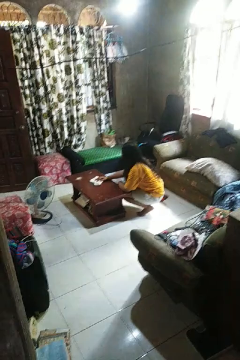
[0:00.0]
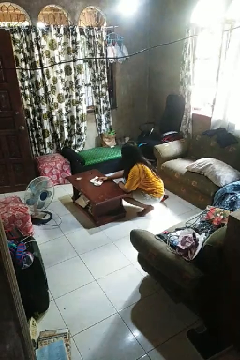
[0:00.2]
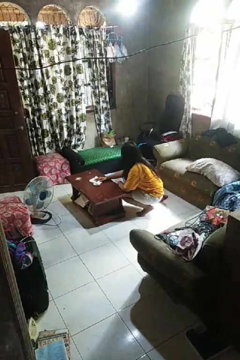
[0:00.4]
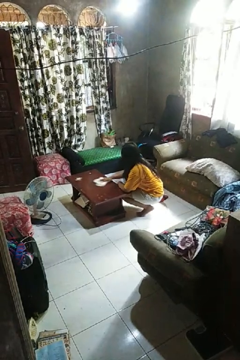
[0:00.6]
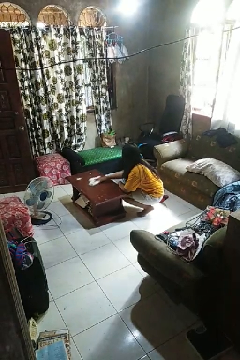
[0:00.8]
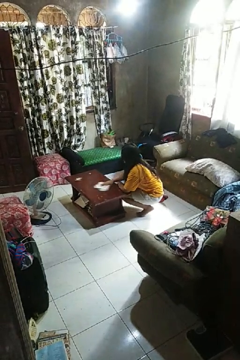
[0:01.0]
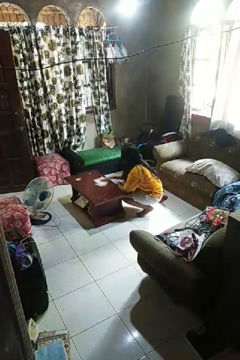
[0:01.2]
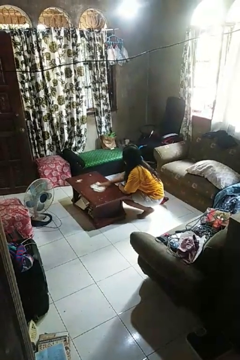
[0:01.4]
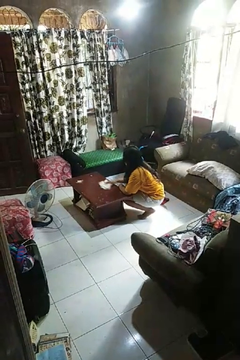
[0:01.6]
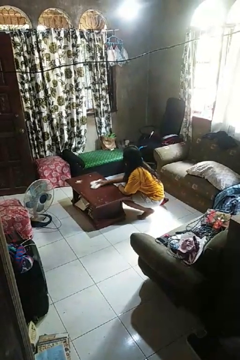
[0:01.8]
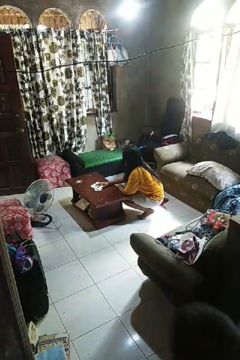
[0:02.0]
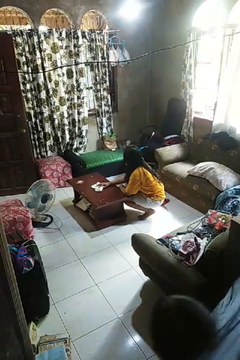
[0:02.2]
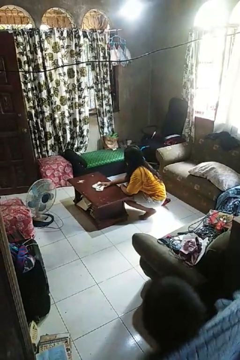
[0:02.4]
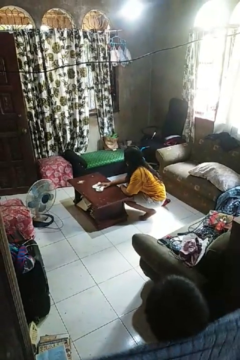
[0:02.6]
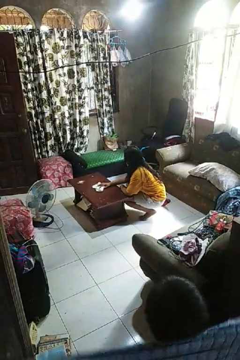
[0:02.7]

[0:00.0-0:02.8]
person cleans table with rag

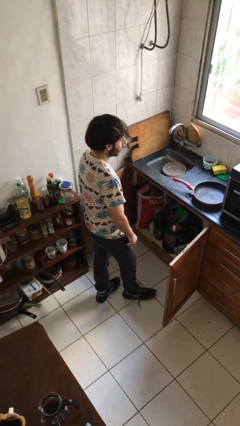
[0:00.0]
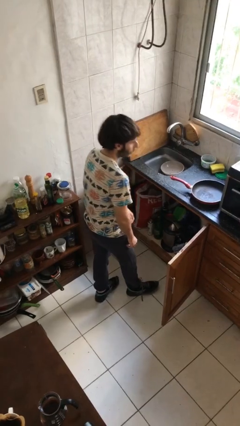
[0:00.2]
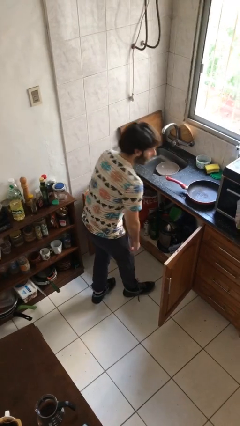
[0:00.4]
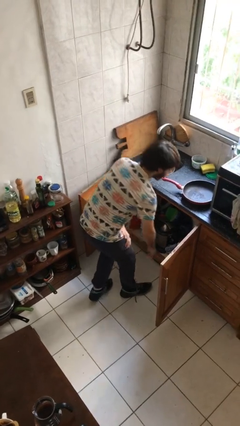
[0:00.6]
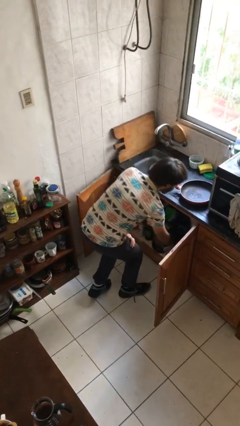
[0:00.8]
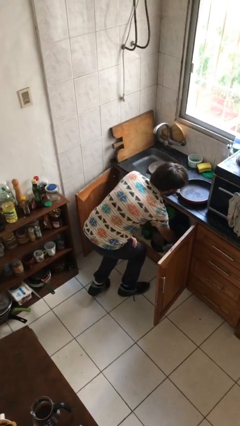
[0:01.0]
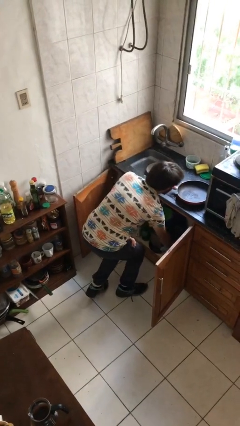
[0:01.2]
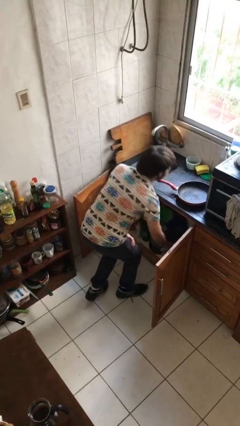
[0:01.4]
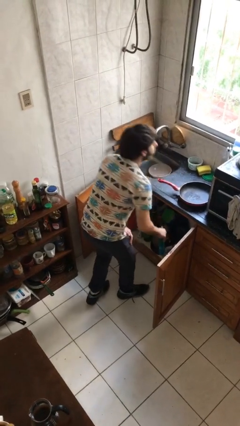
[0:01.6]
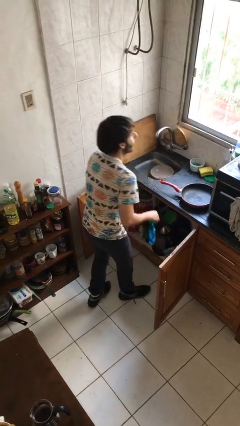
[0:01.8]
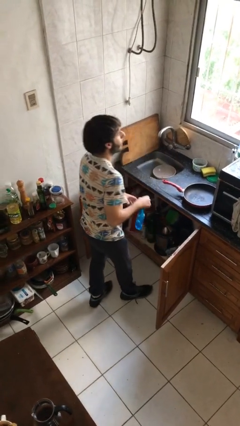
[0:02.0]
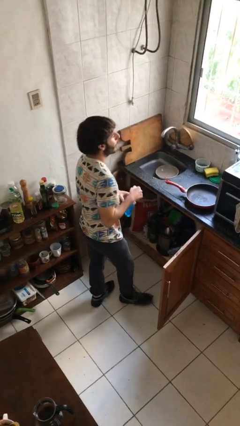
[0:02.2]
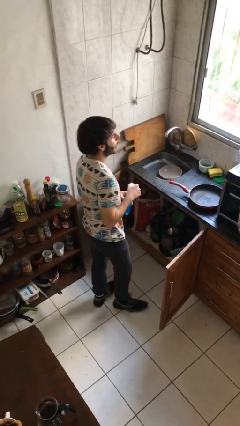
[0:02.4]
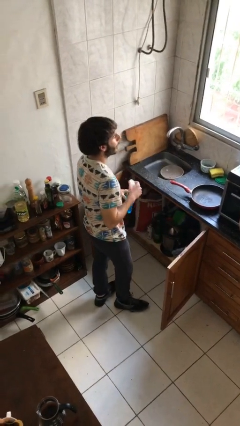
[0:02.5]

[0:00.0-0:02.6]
person picks up object from cabinet

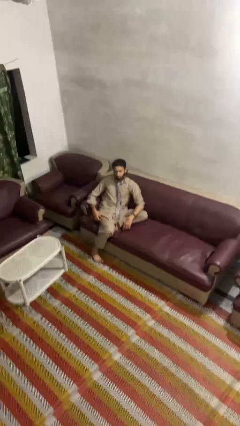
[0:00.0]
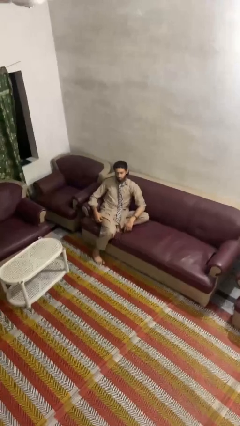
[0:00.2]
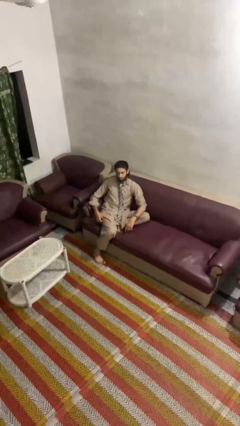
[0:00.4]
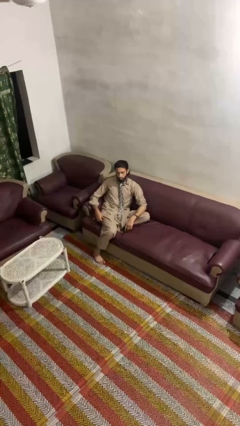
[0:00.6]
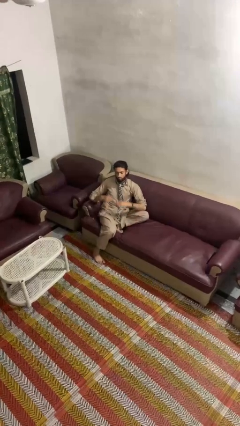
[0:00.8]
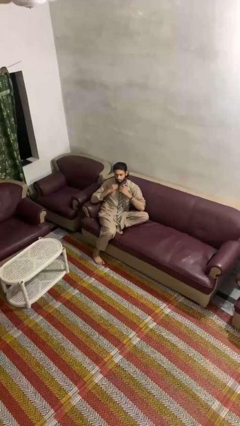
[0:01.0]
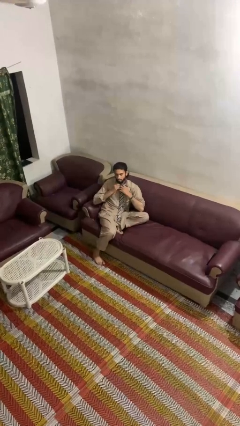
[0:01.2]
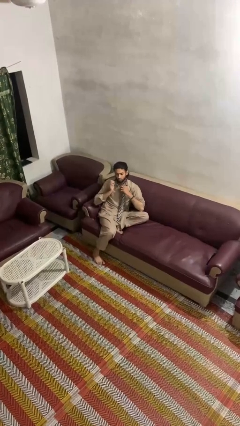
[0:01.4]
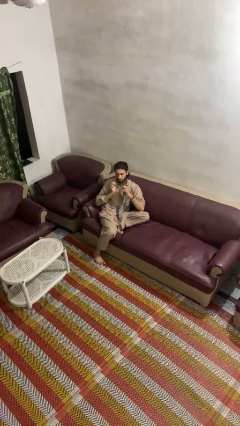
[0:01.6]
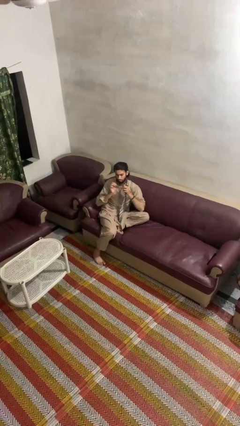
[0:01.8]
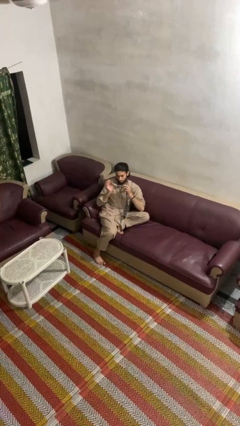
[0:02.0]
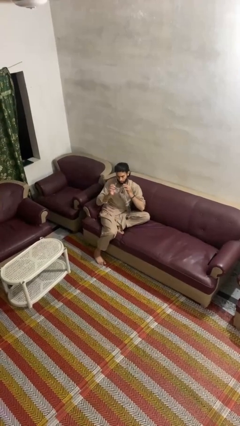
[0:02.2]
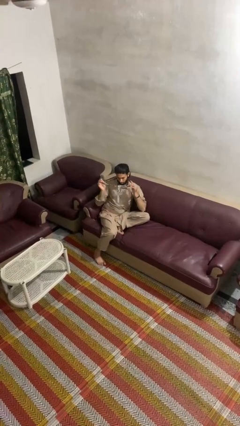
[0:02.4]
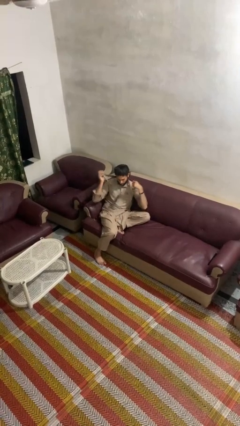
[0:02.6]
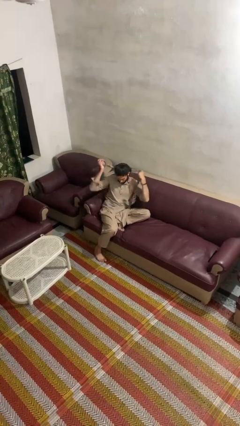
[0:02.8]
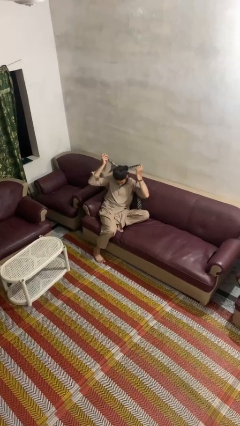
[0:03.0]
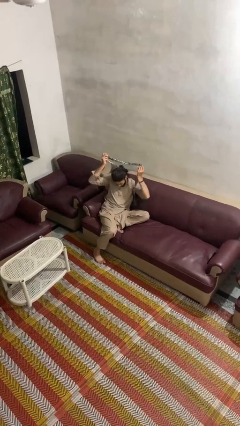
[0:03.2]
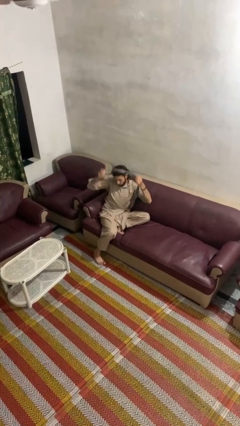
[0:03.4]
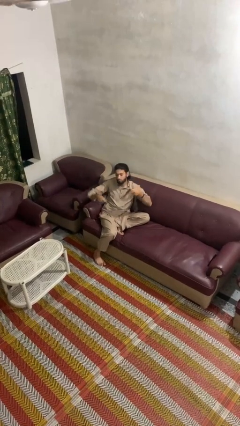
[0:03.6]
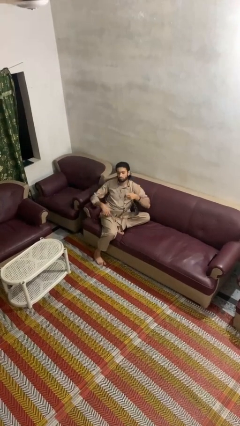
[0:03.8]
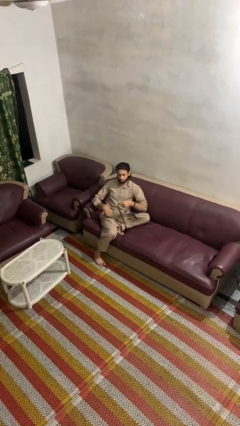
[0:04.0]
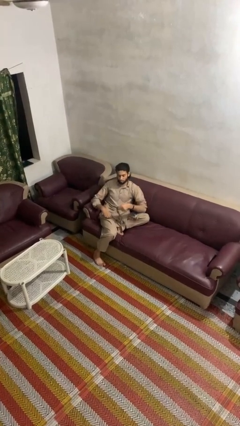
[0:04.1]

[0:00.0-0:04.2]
person takes off necktie

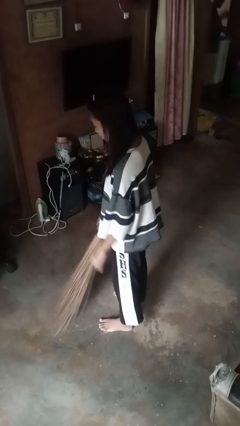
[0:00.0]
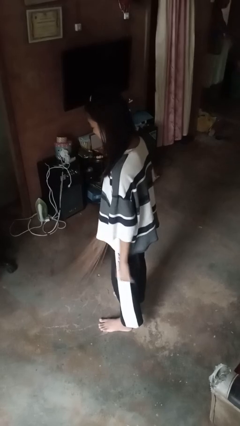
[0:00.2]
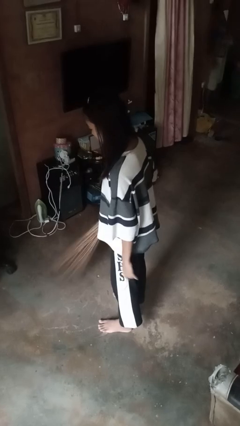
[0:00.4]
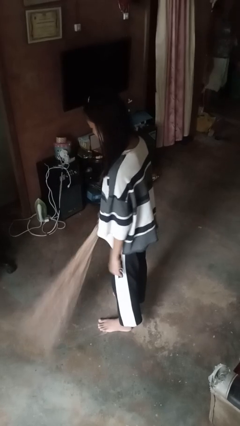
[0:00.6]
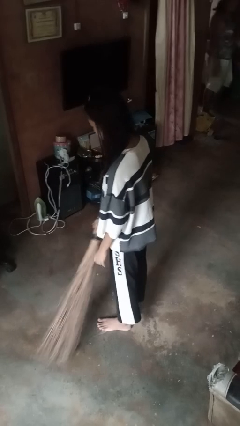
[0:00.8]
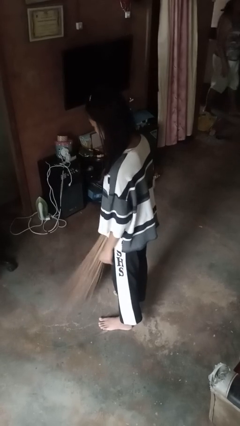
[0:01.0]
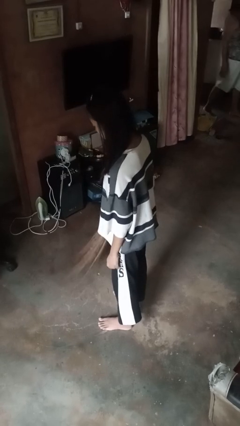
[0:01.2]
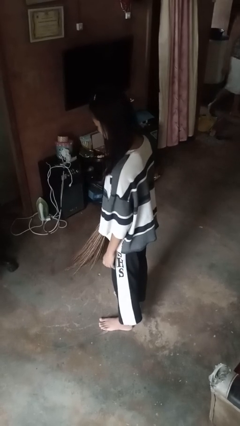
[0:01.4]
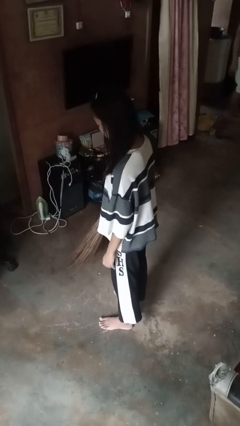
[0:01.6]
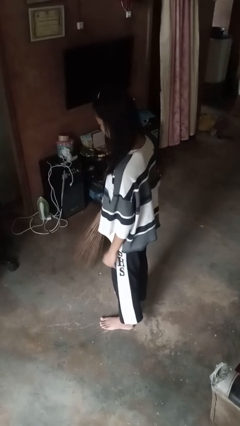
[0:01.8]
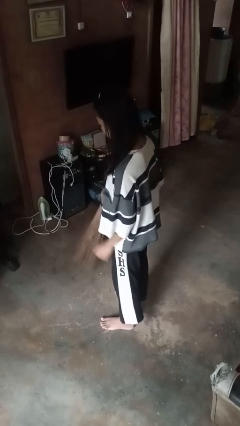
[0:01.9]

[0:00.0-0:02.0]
person sweeps floor

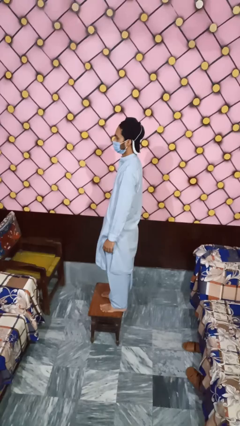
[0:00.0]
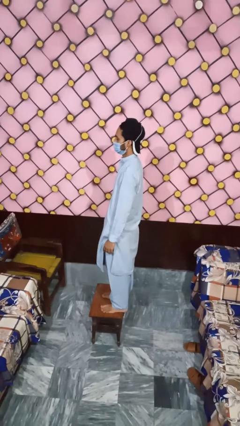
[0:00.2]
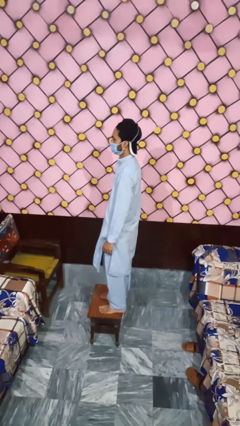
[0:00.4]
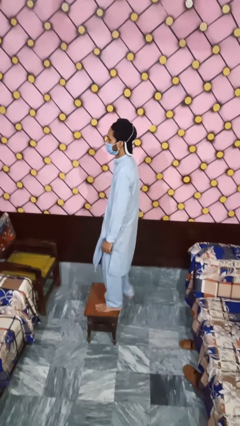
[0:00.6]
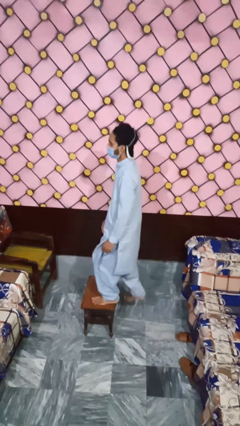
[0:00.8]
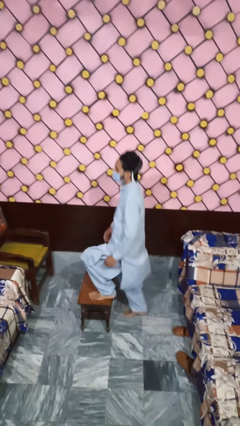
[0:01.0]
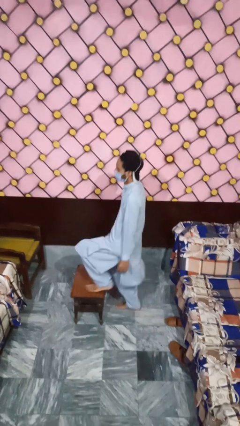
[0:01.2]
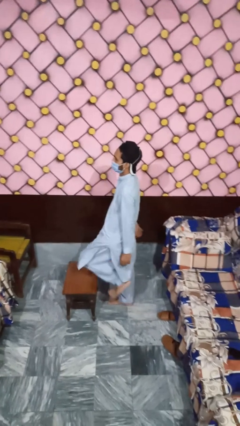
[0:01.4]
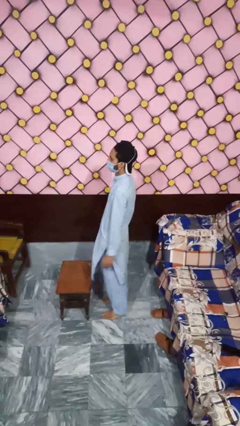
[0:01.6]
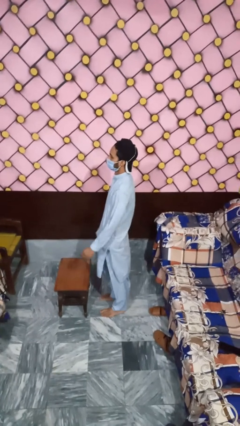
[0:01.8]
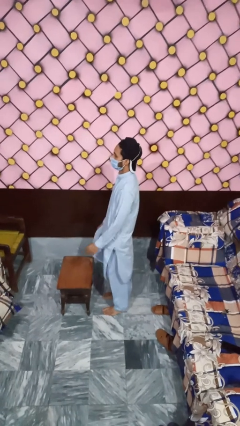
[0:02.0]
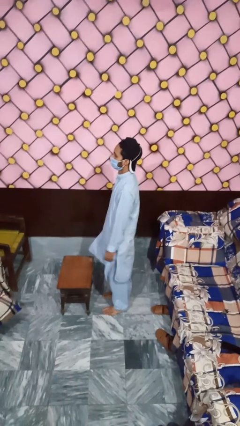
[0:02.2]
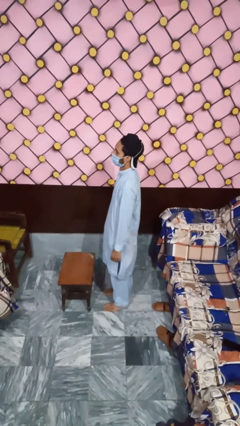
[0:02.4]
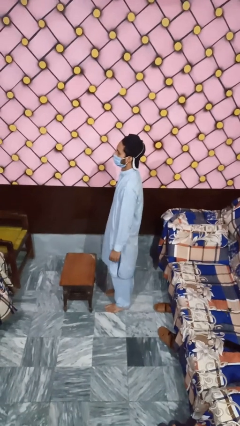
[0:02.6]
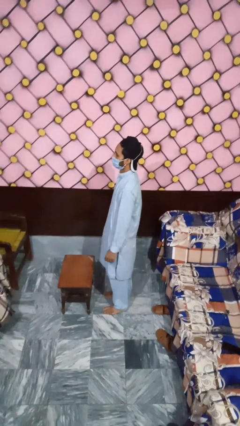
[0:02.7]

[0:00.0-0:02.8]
person climbs off table

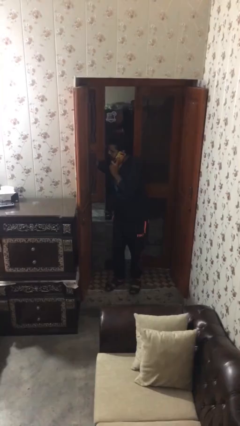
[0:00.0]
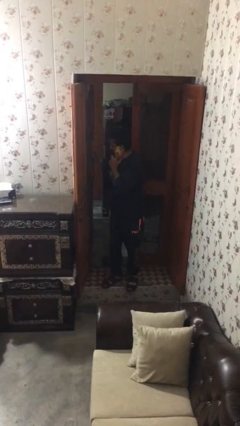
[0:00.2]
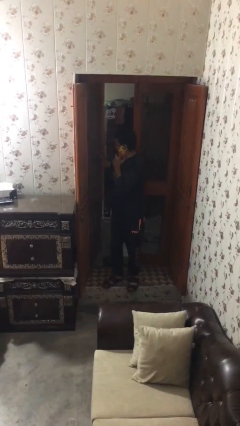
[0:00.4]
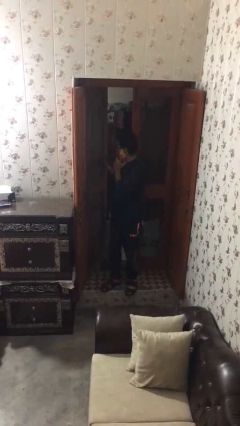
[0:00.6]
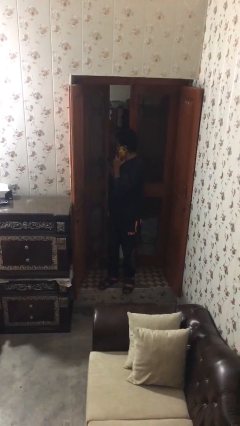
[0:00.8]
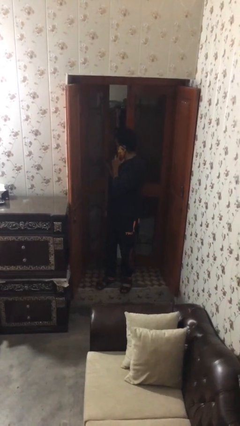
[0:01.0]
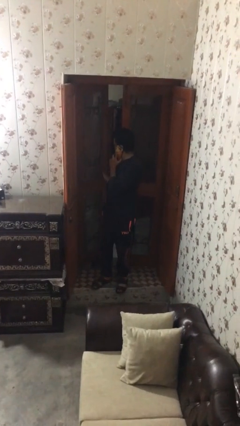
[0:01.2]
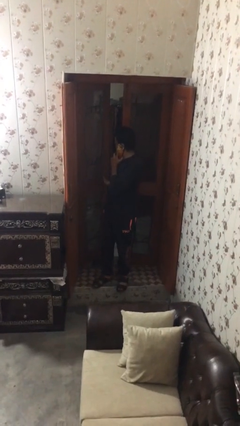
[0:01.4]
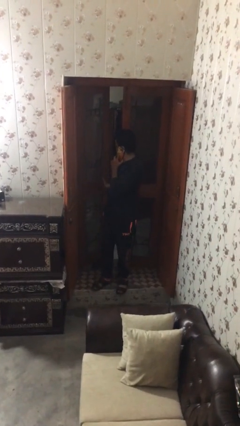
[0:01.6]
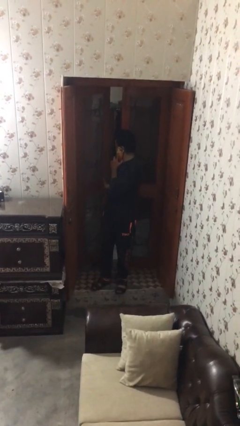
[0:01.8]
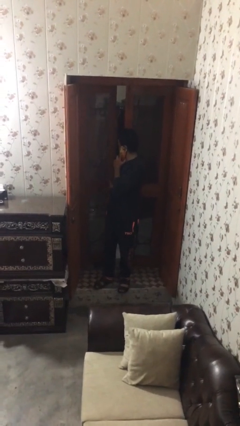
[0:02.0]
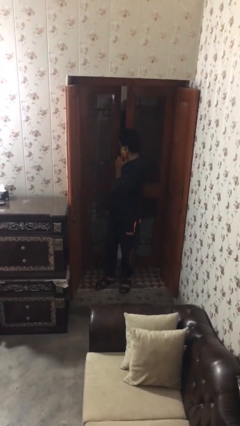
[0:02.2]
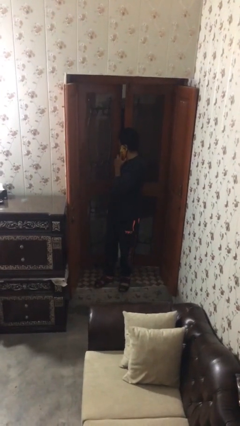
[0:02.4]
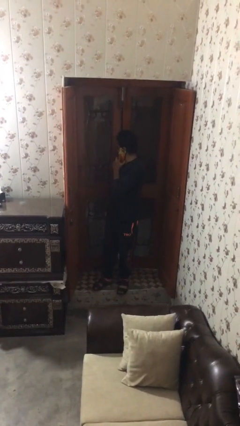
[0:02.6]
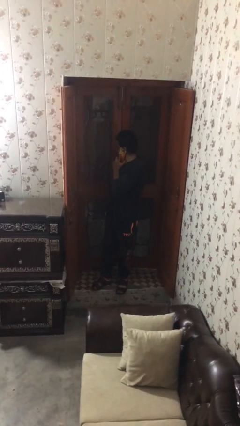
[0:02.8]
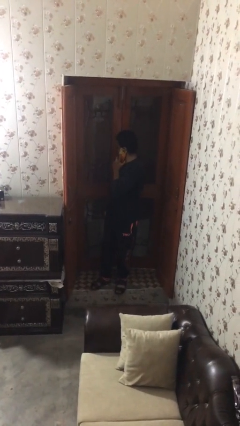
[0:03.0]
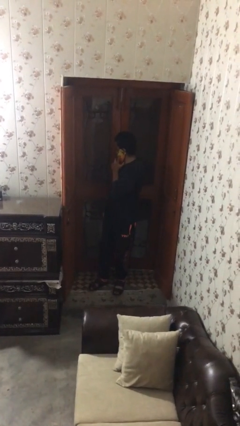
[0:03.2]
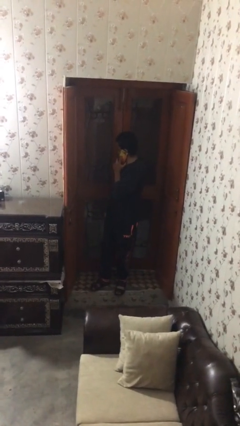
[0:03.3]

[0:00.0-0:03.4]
person closes facility door
